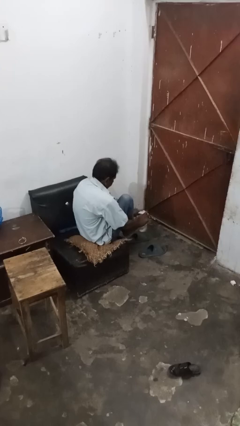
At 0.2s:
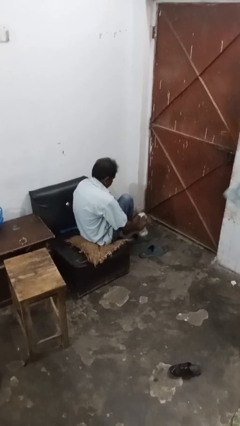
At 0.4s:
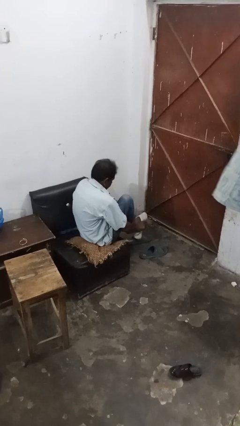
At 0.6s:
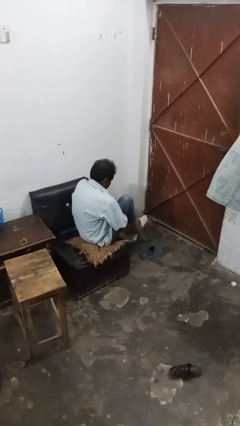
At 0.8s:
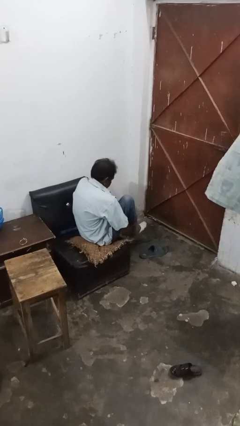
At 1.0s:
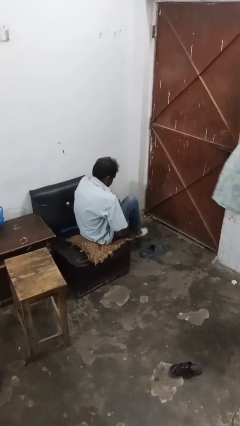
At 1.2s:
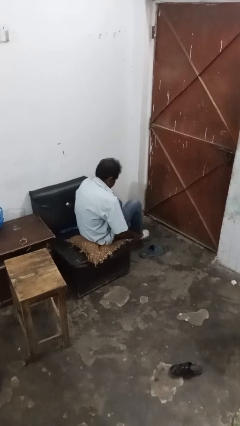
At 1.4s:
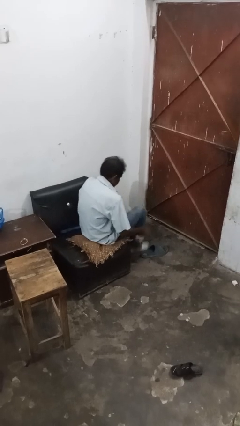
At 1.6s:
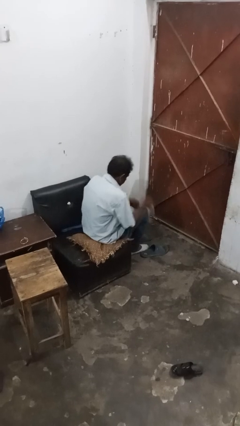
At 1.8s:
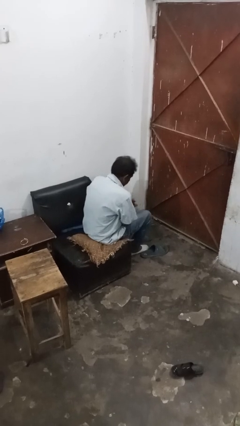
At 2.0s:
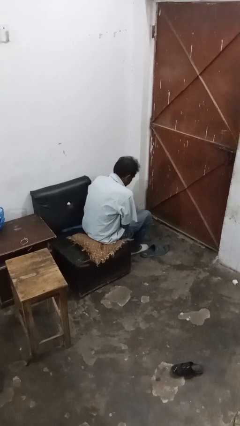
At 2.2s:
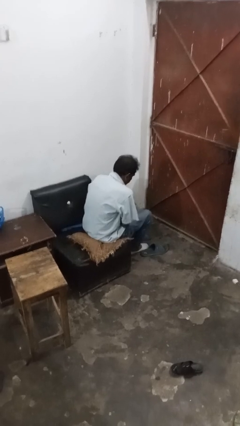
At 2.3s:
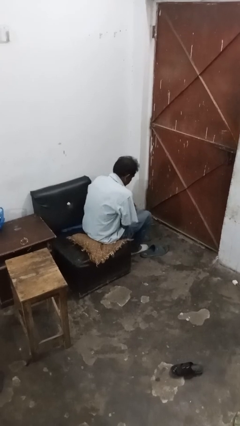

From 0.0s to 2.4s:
person puts on socks

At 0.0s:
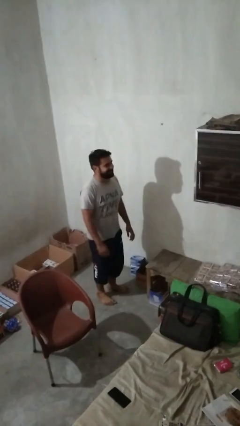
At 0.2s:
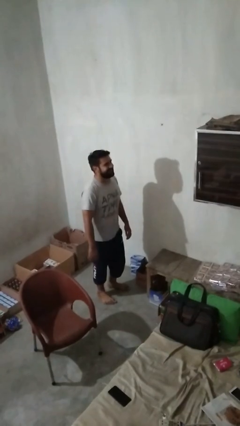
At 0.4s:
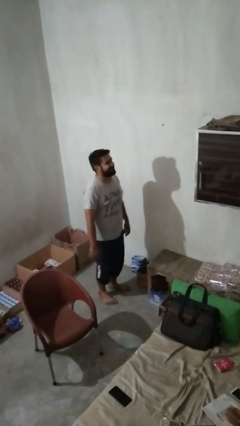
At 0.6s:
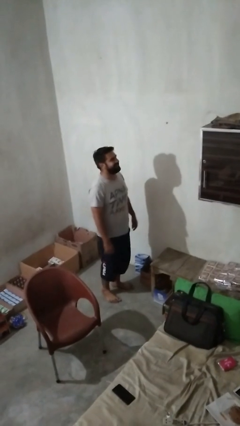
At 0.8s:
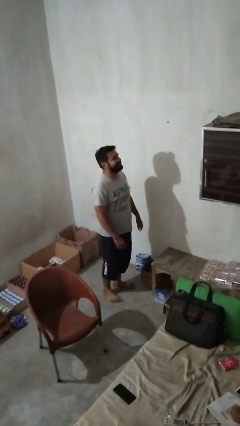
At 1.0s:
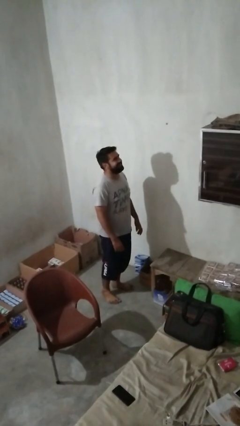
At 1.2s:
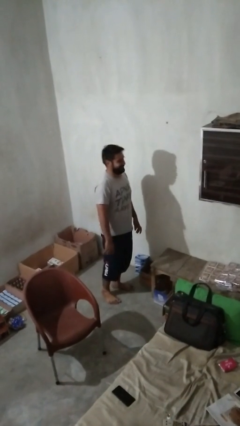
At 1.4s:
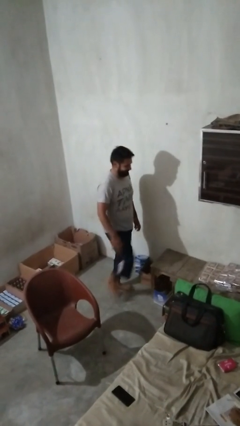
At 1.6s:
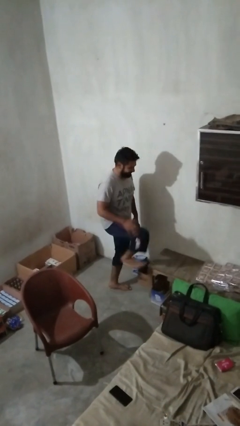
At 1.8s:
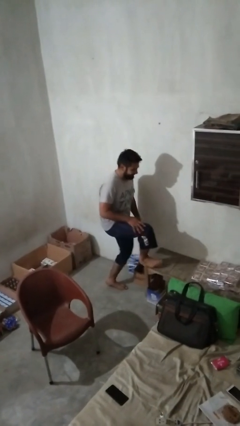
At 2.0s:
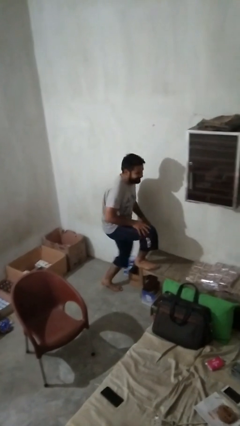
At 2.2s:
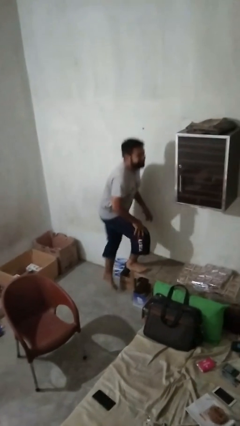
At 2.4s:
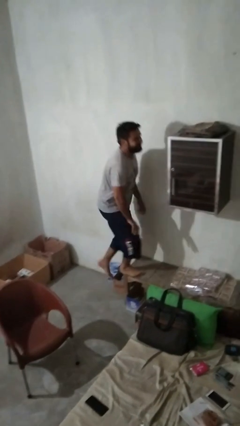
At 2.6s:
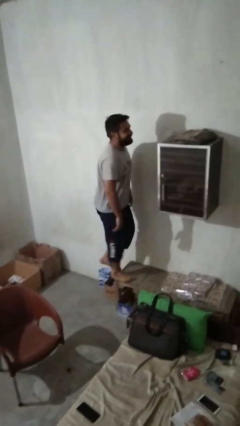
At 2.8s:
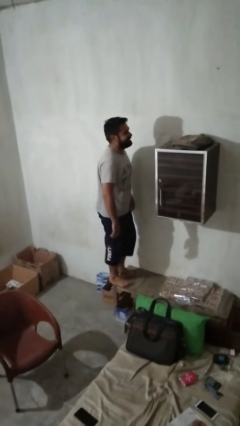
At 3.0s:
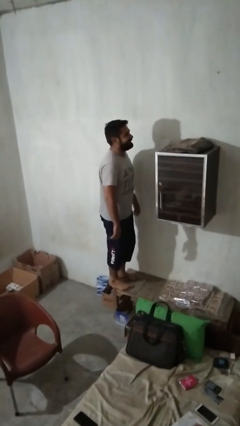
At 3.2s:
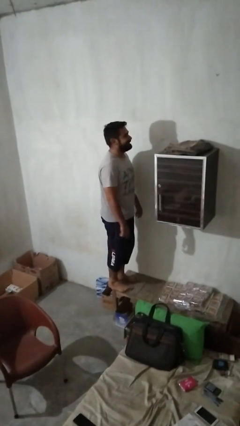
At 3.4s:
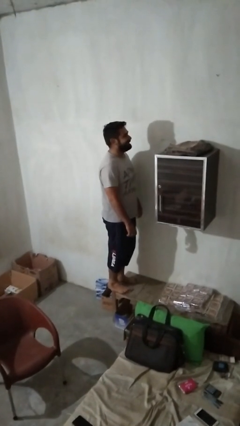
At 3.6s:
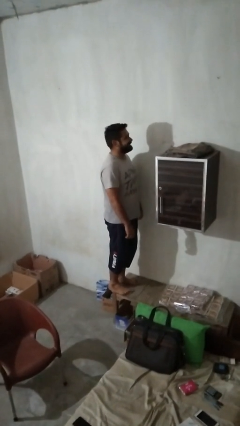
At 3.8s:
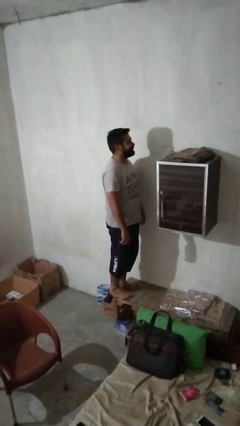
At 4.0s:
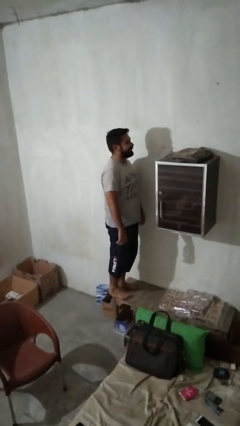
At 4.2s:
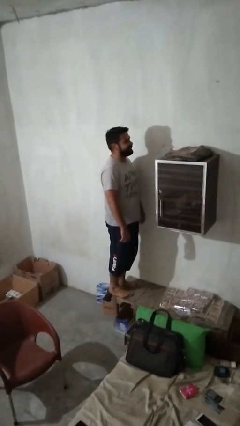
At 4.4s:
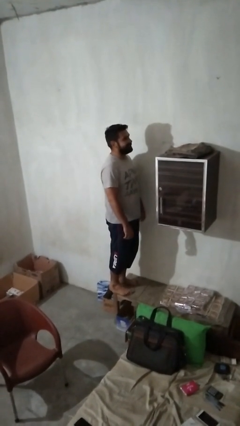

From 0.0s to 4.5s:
person climbs on table

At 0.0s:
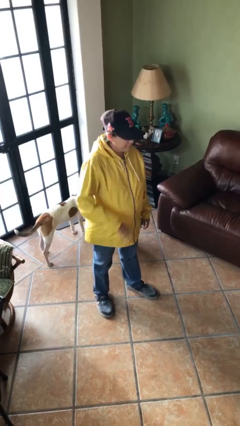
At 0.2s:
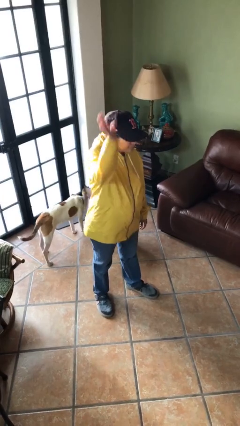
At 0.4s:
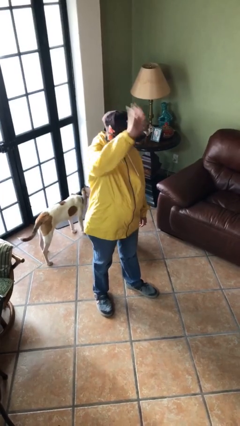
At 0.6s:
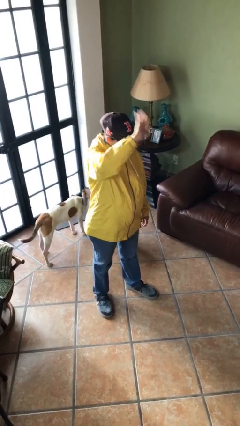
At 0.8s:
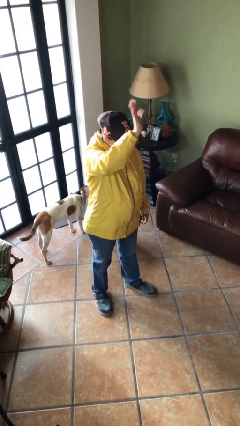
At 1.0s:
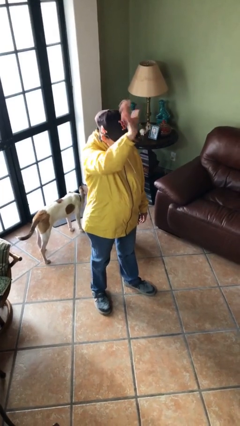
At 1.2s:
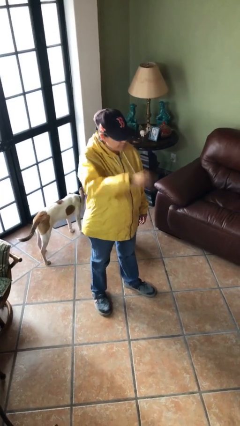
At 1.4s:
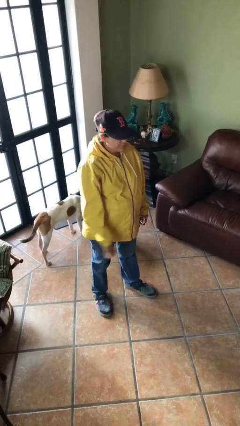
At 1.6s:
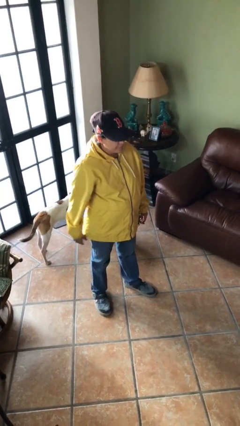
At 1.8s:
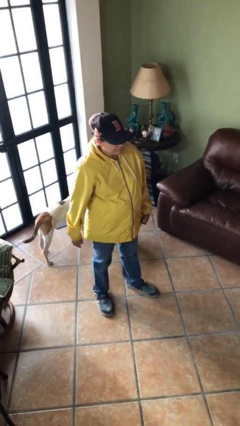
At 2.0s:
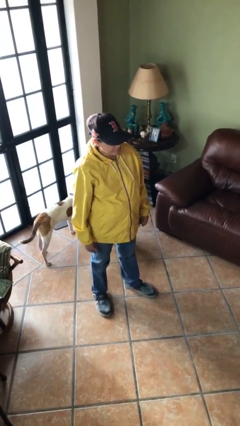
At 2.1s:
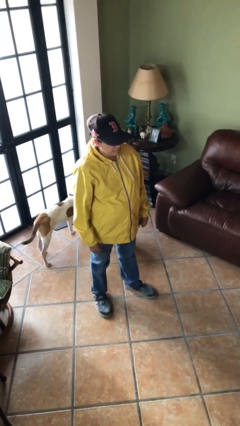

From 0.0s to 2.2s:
person waves at person

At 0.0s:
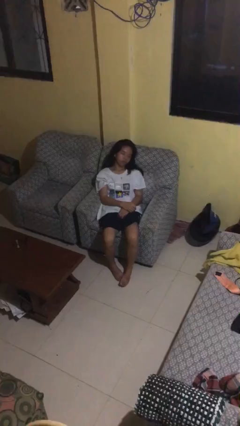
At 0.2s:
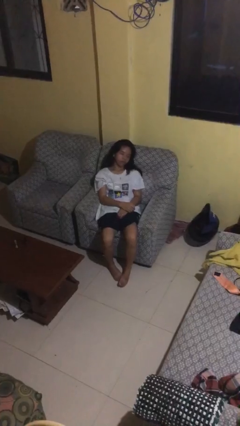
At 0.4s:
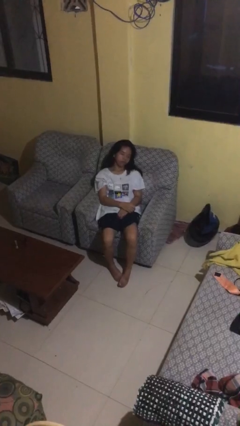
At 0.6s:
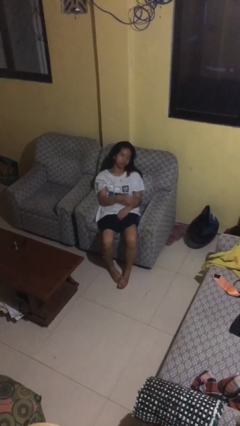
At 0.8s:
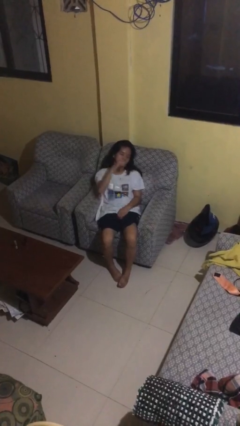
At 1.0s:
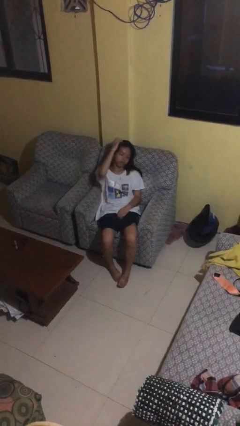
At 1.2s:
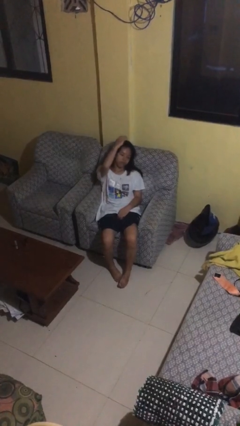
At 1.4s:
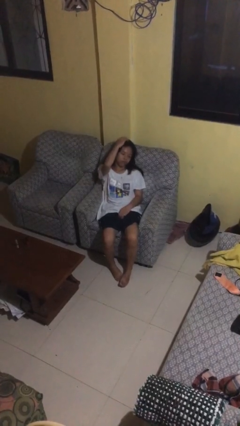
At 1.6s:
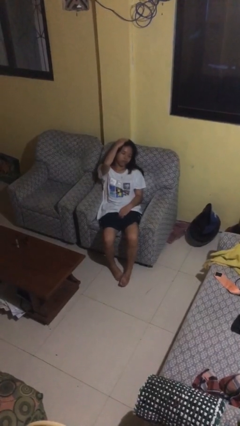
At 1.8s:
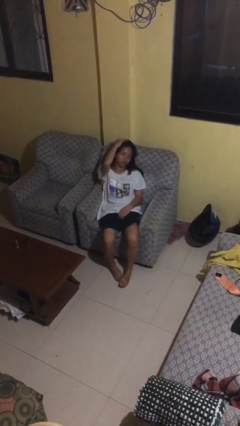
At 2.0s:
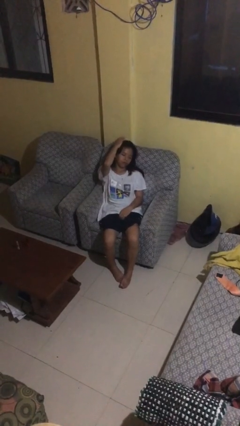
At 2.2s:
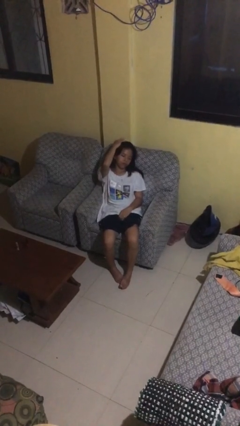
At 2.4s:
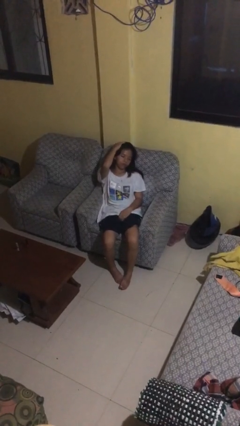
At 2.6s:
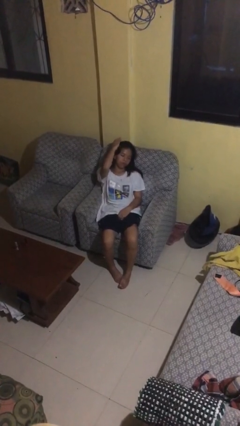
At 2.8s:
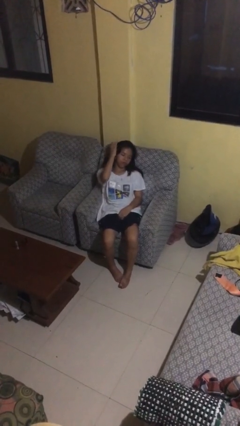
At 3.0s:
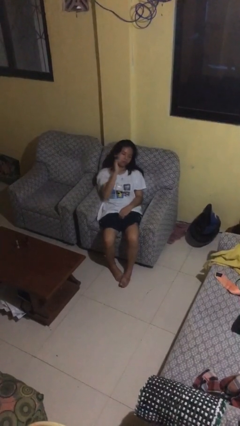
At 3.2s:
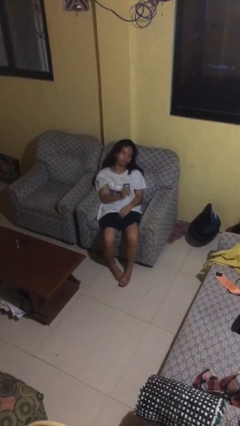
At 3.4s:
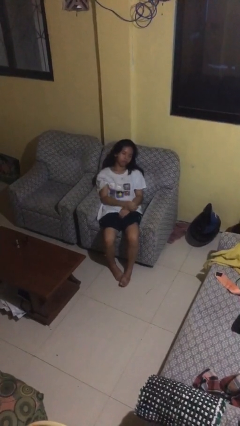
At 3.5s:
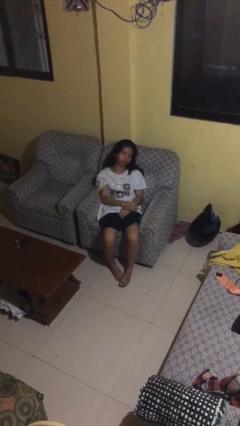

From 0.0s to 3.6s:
person pats head

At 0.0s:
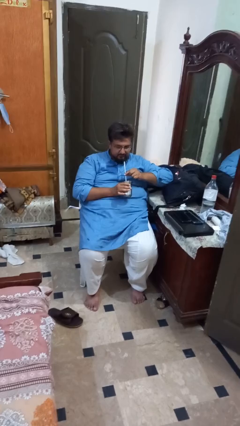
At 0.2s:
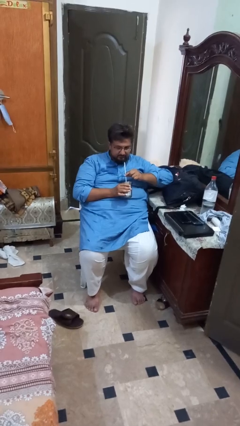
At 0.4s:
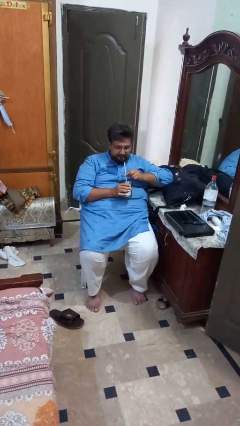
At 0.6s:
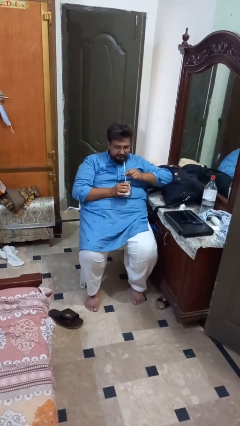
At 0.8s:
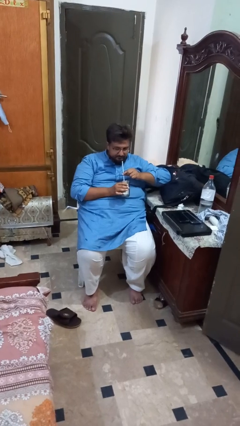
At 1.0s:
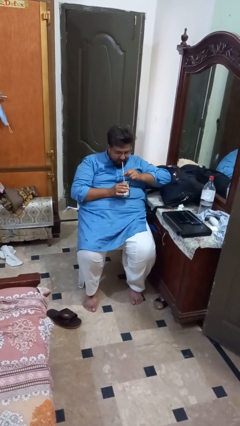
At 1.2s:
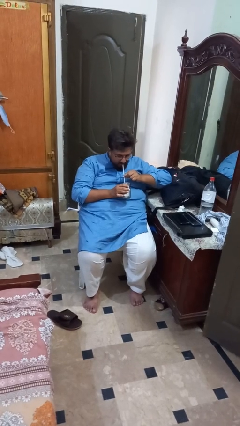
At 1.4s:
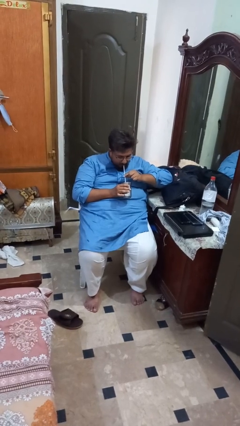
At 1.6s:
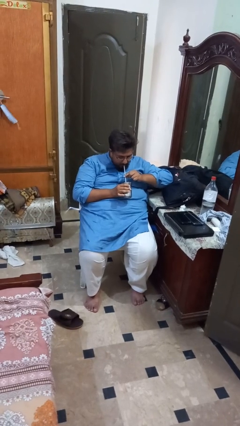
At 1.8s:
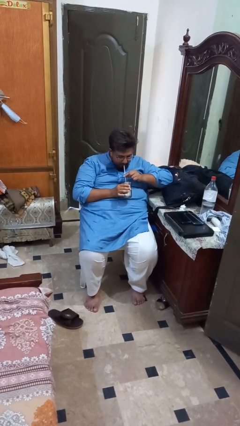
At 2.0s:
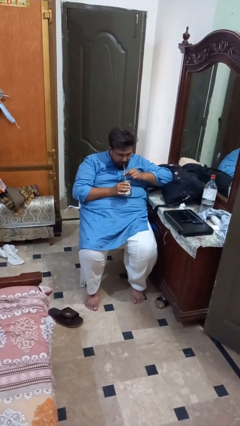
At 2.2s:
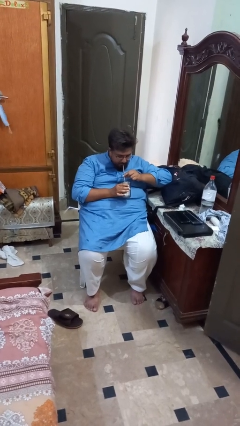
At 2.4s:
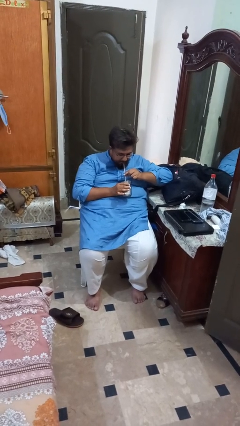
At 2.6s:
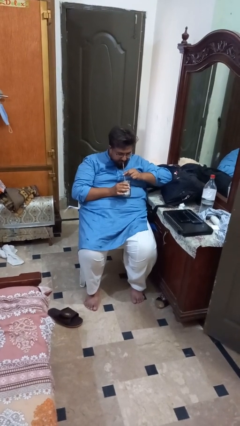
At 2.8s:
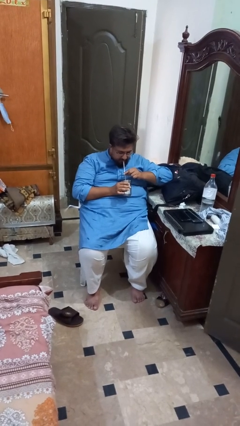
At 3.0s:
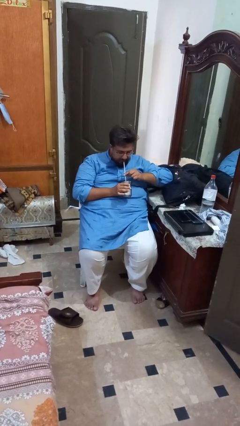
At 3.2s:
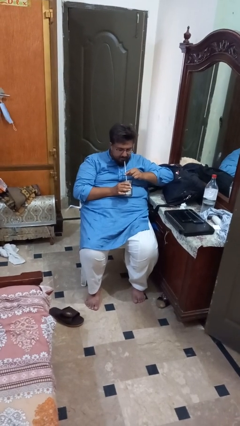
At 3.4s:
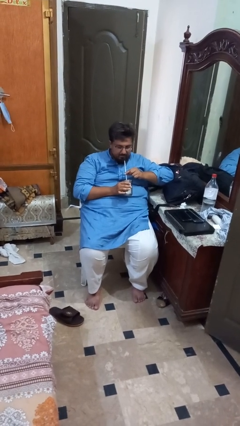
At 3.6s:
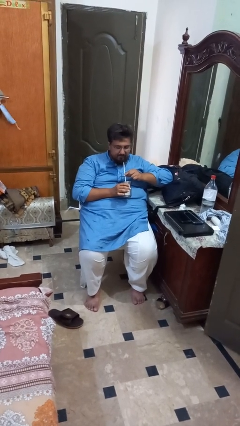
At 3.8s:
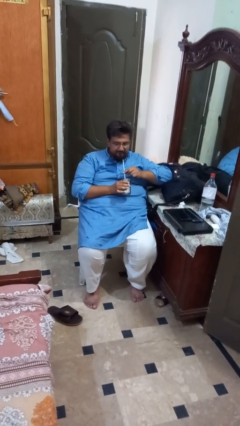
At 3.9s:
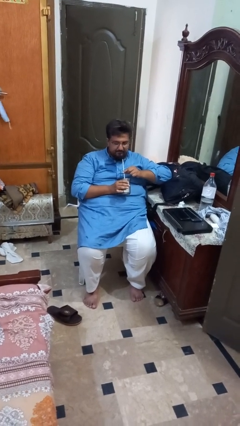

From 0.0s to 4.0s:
person drinks from straw

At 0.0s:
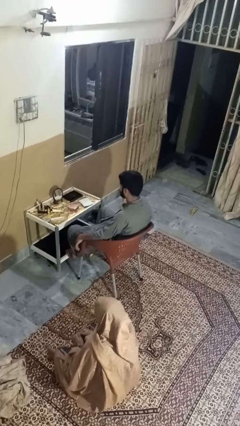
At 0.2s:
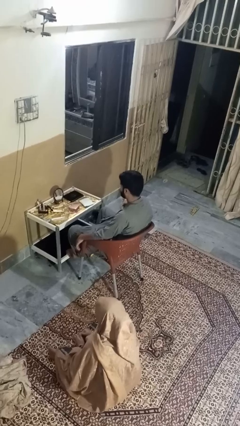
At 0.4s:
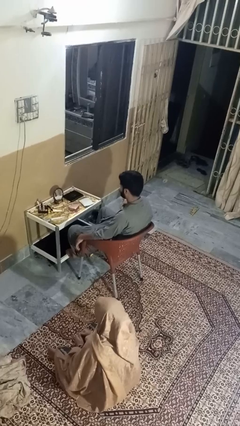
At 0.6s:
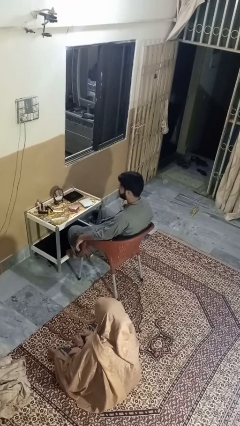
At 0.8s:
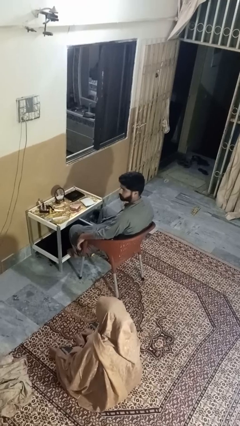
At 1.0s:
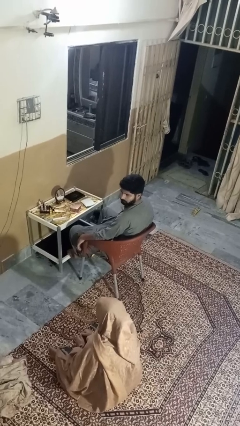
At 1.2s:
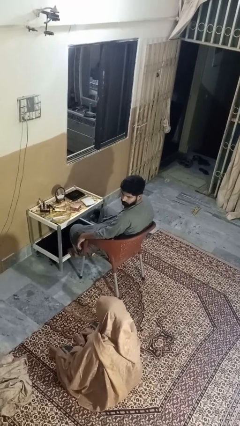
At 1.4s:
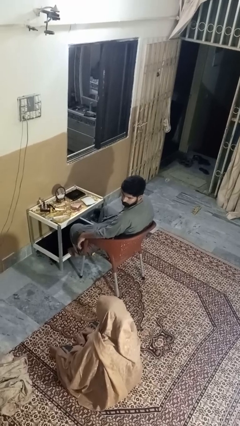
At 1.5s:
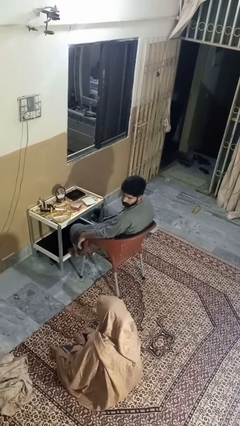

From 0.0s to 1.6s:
person looks over shoulder
